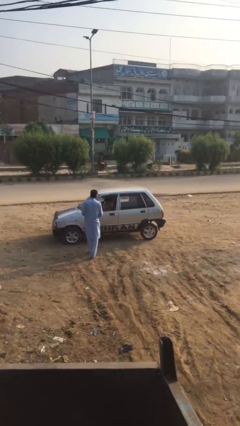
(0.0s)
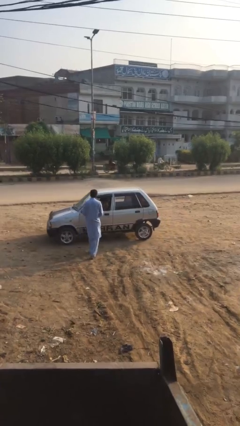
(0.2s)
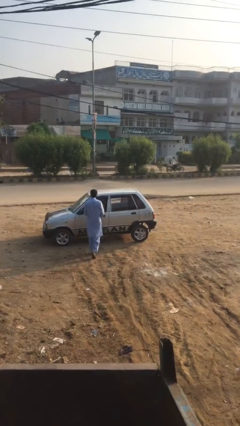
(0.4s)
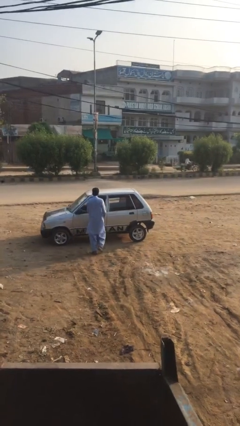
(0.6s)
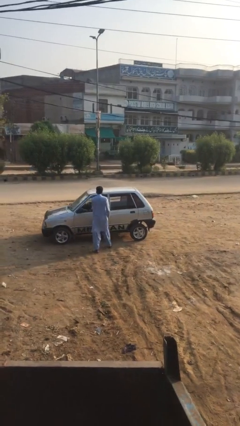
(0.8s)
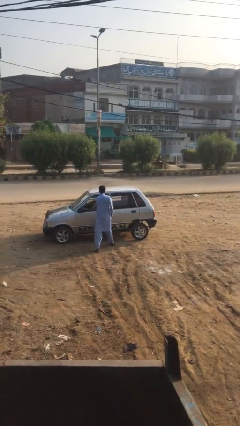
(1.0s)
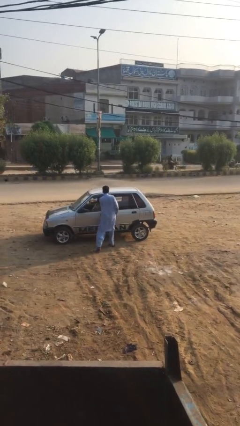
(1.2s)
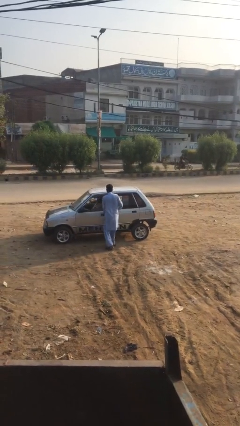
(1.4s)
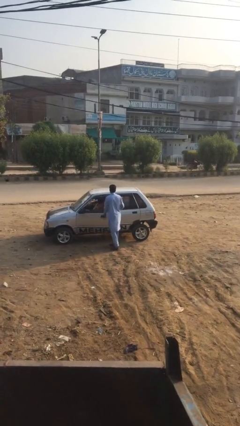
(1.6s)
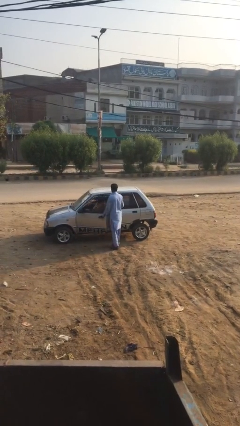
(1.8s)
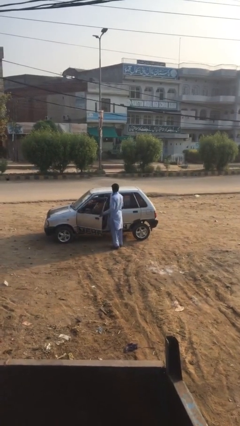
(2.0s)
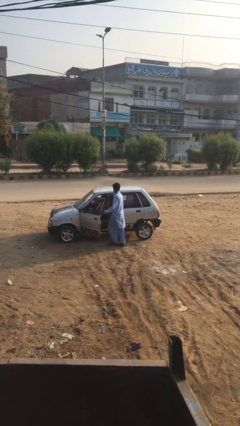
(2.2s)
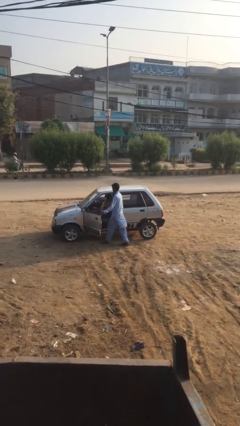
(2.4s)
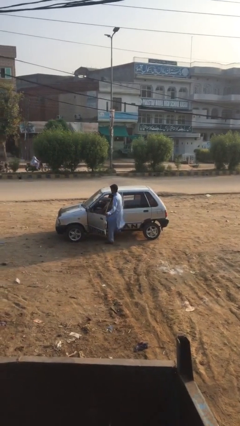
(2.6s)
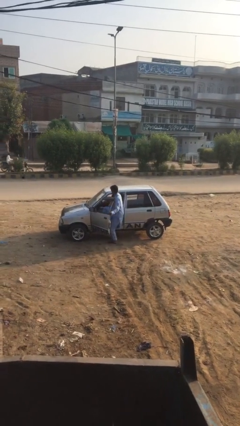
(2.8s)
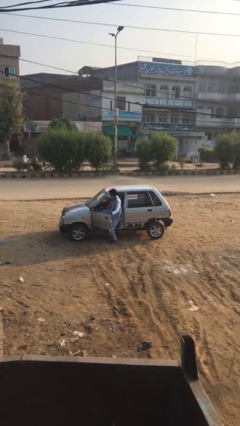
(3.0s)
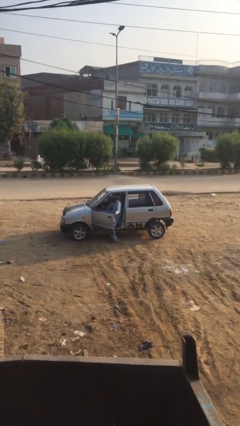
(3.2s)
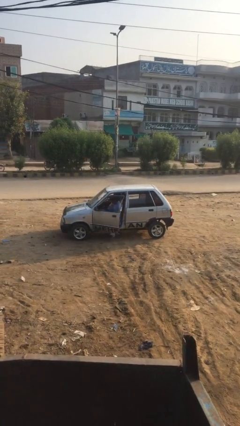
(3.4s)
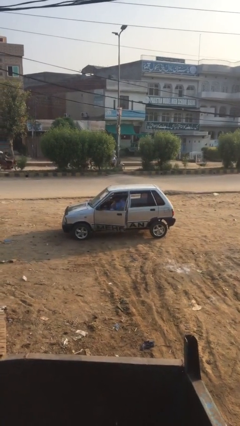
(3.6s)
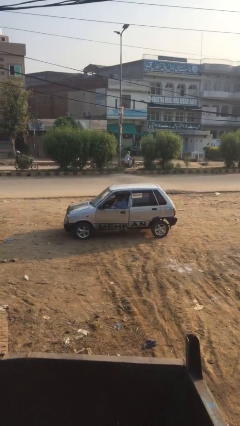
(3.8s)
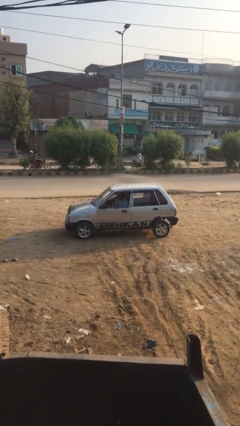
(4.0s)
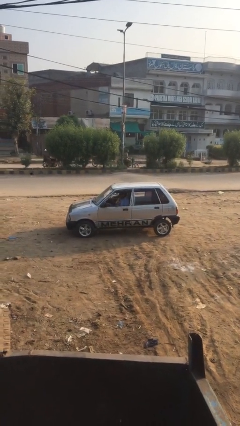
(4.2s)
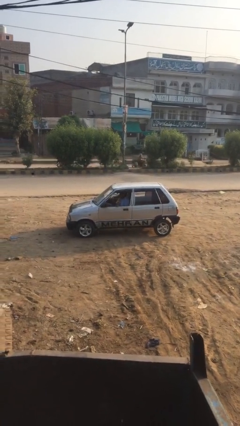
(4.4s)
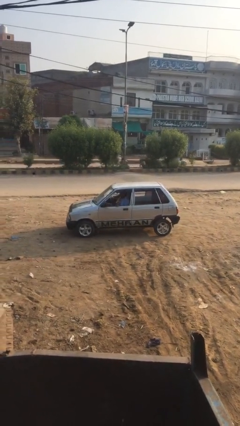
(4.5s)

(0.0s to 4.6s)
car picks up person

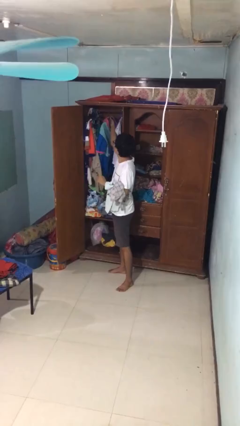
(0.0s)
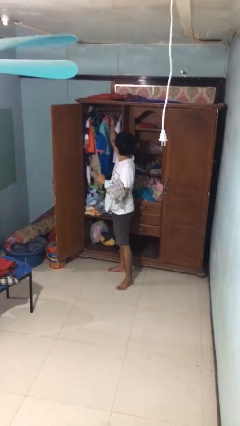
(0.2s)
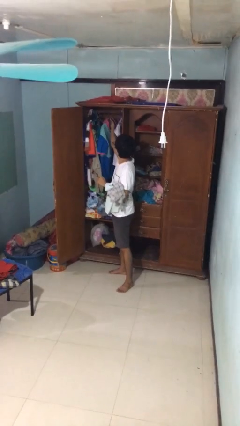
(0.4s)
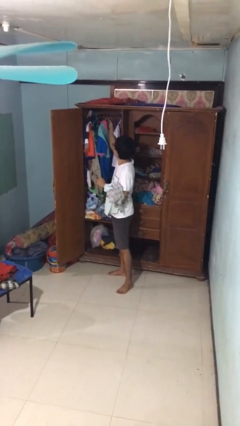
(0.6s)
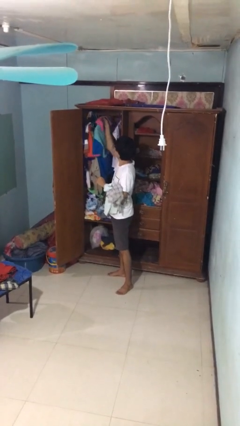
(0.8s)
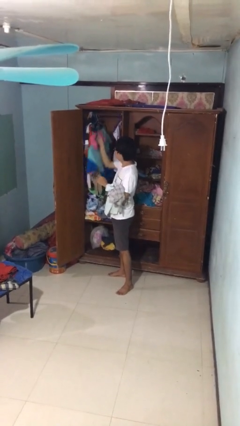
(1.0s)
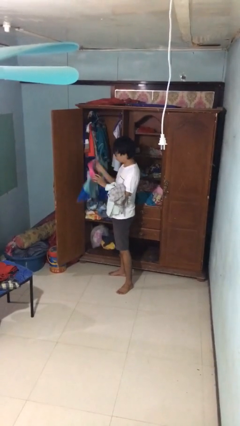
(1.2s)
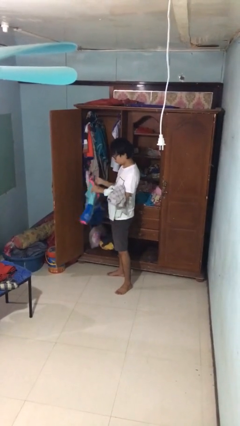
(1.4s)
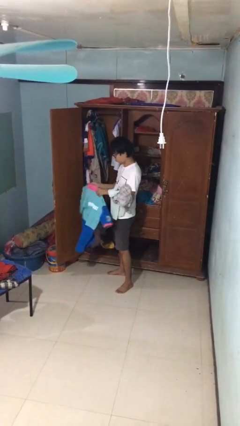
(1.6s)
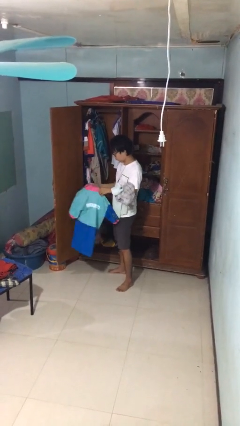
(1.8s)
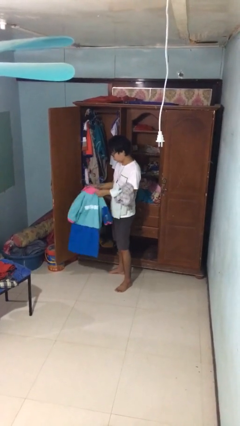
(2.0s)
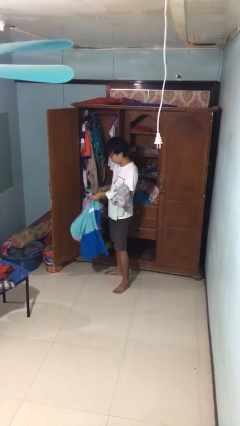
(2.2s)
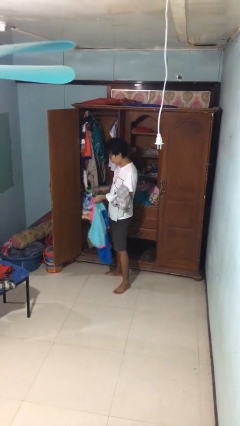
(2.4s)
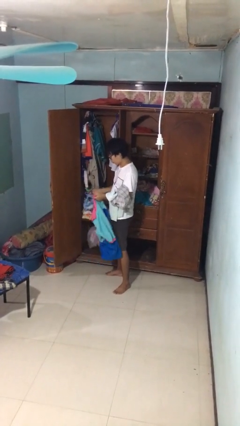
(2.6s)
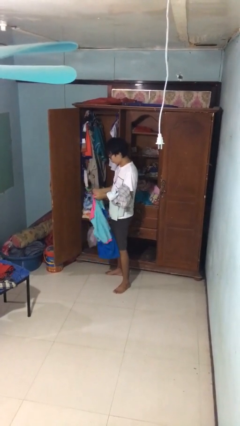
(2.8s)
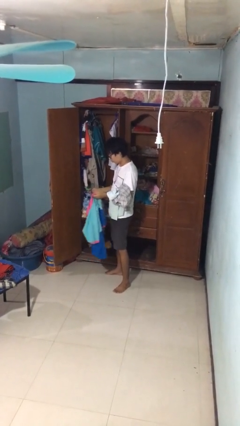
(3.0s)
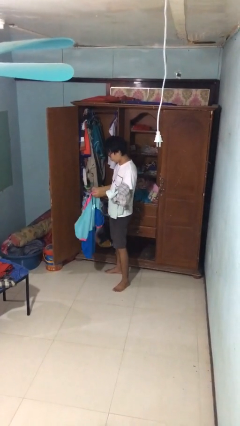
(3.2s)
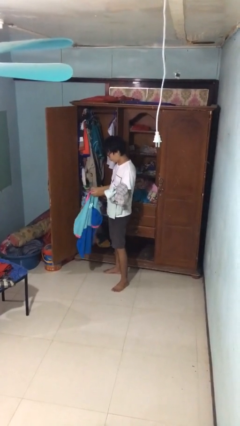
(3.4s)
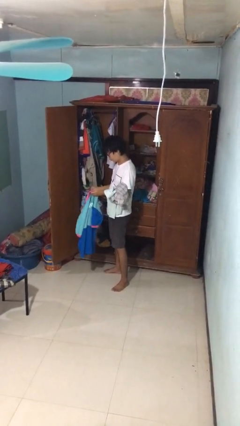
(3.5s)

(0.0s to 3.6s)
person takes clothes from closet

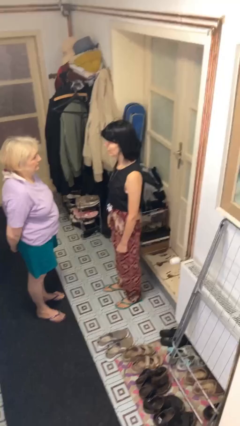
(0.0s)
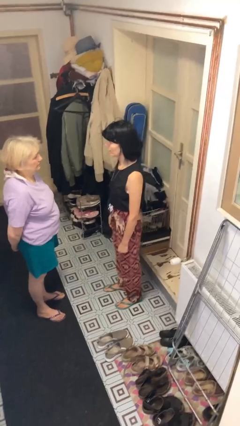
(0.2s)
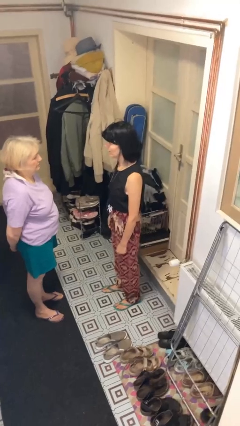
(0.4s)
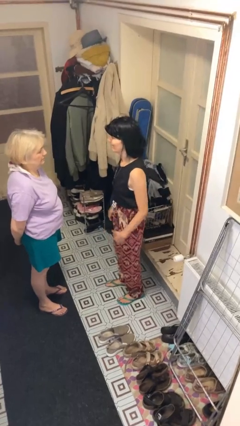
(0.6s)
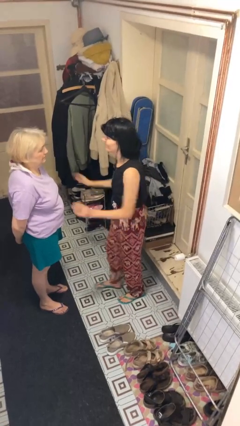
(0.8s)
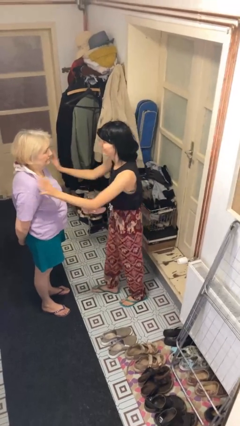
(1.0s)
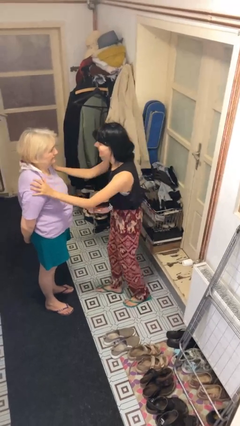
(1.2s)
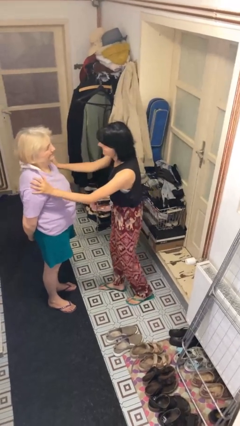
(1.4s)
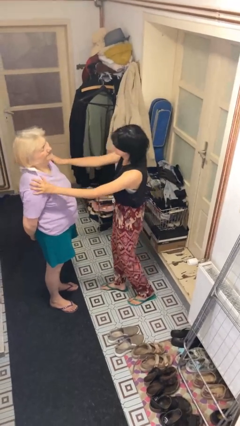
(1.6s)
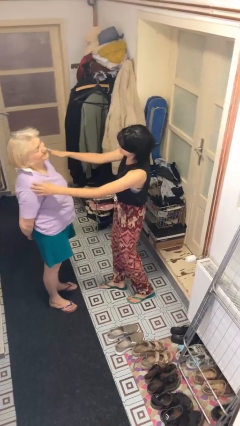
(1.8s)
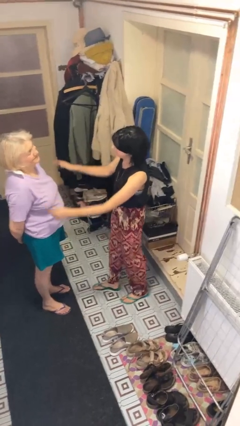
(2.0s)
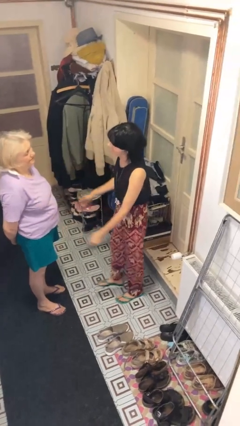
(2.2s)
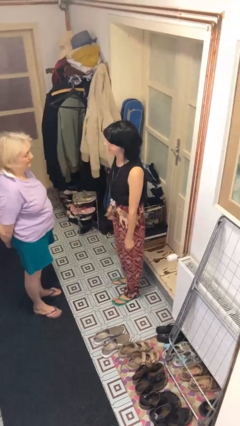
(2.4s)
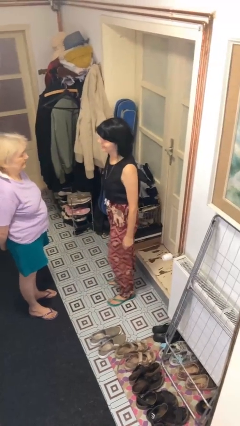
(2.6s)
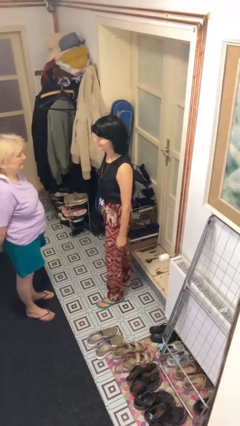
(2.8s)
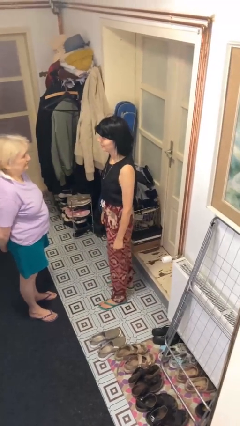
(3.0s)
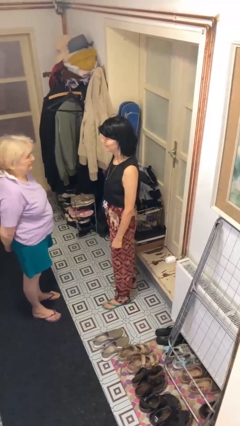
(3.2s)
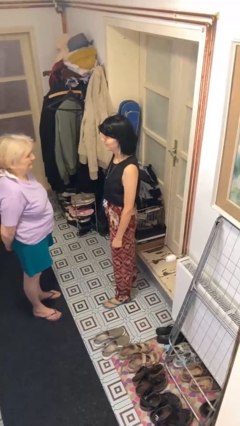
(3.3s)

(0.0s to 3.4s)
person shoves person

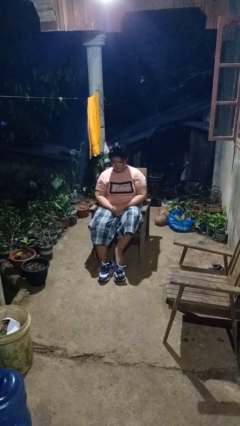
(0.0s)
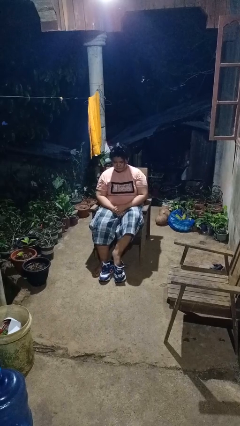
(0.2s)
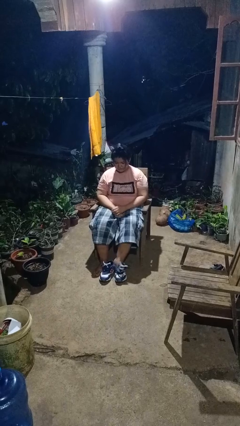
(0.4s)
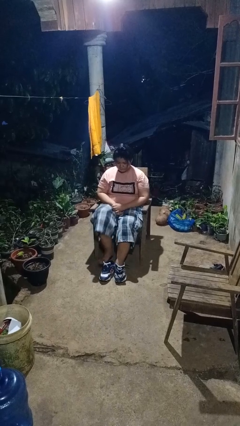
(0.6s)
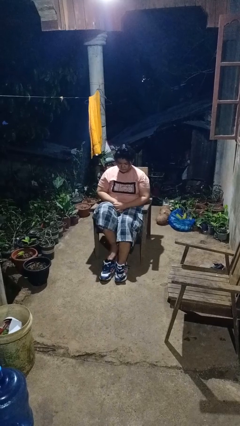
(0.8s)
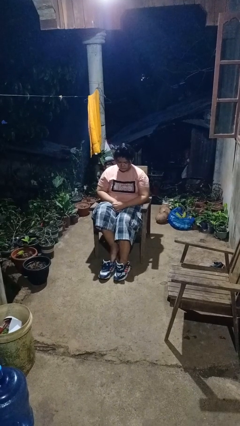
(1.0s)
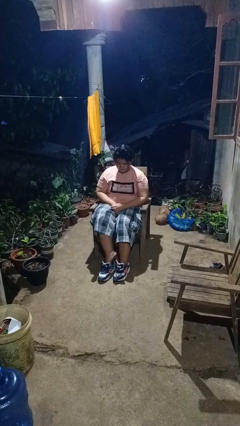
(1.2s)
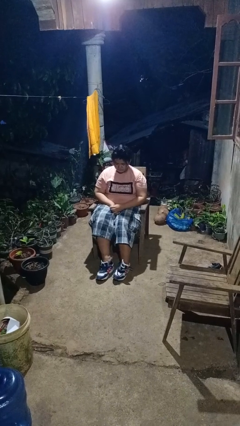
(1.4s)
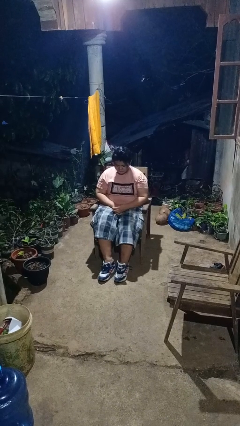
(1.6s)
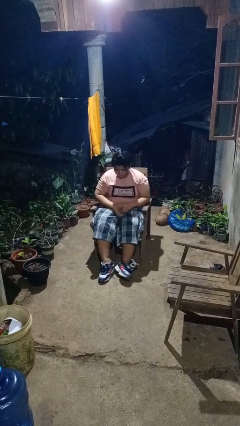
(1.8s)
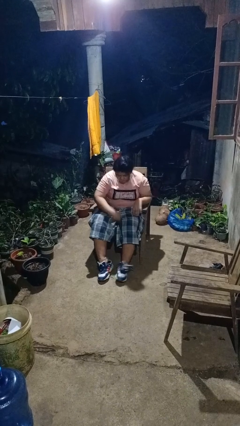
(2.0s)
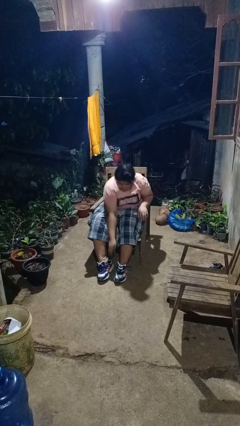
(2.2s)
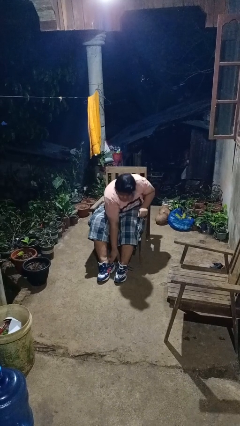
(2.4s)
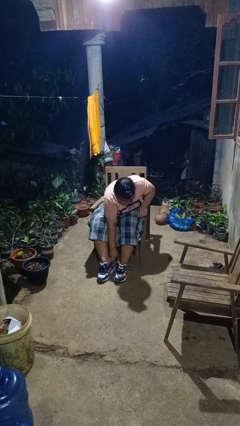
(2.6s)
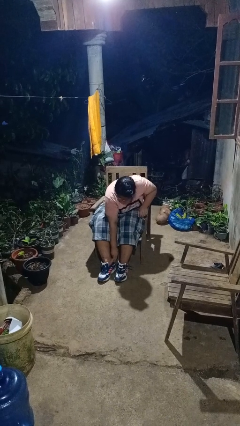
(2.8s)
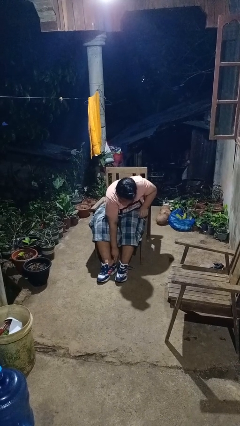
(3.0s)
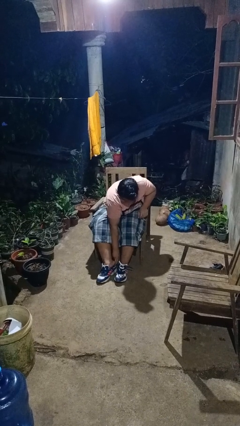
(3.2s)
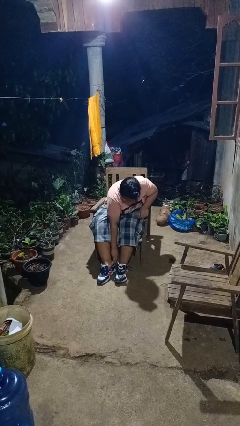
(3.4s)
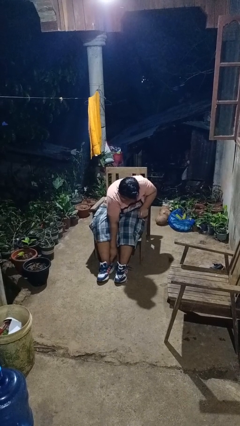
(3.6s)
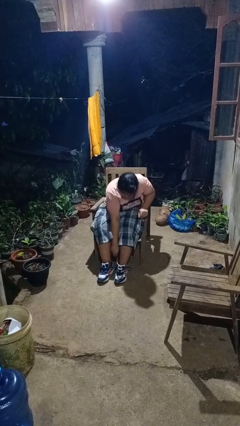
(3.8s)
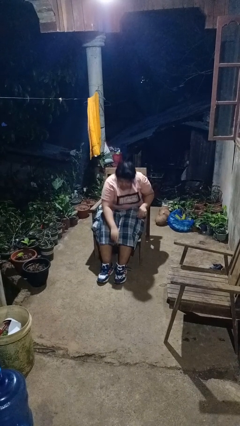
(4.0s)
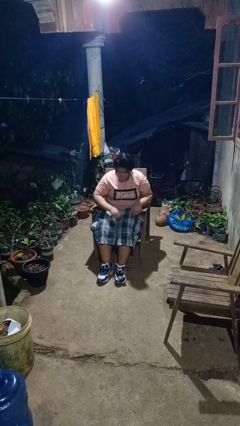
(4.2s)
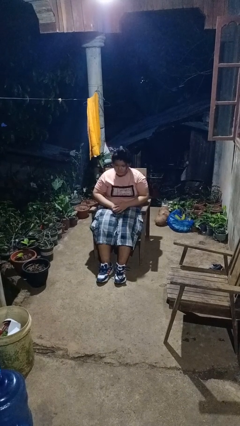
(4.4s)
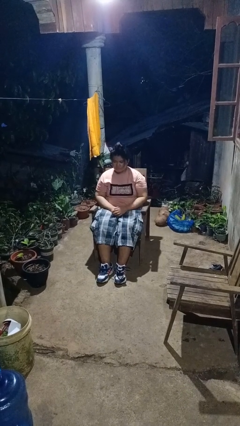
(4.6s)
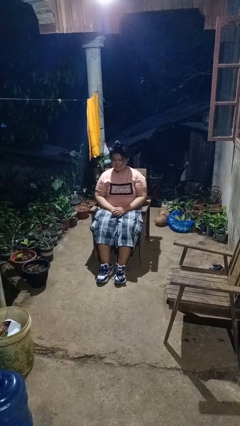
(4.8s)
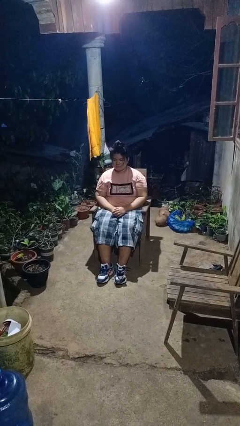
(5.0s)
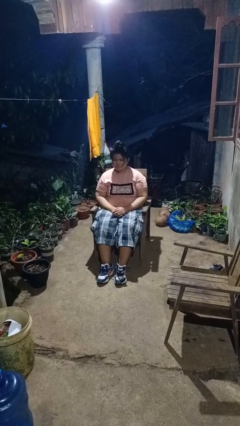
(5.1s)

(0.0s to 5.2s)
person puts on shoes

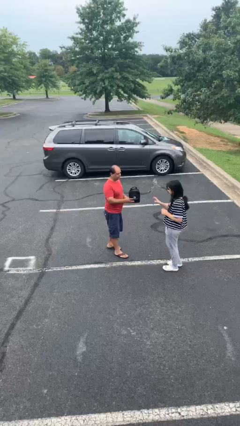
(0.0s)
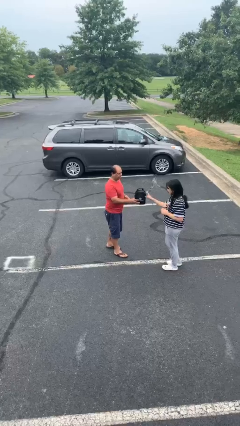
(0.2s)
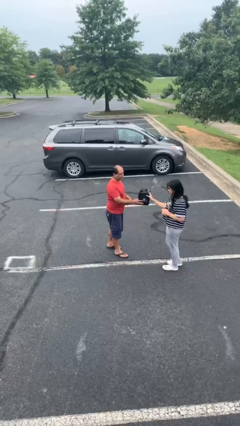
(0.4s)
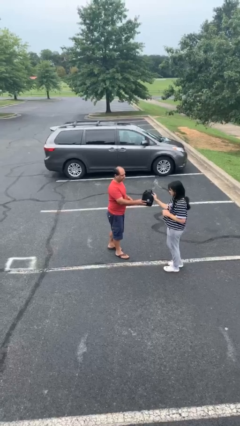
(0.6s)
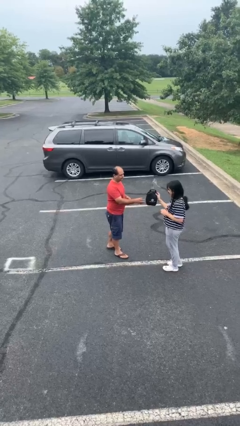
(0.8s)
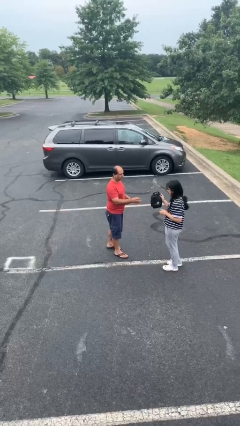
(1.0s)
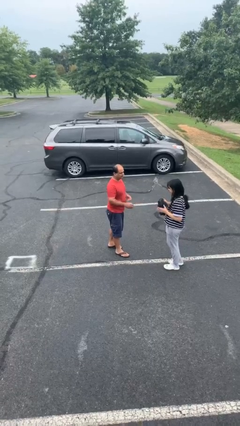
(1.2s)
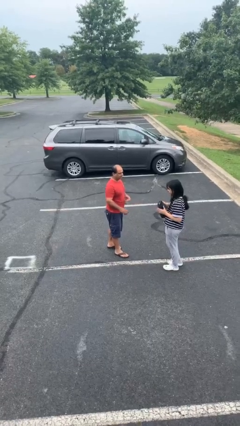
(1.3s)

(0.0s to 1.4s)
person transfers object to person
